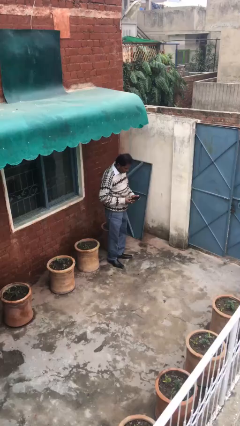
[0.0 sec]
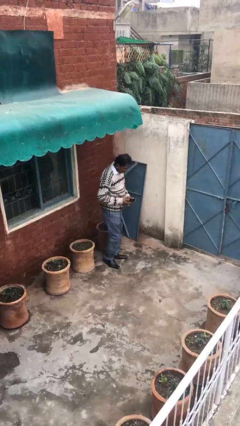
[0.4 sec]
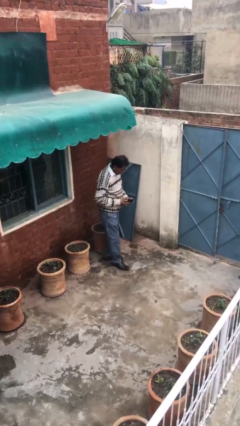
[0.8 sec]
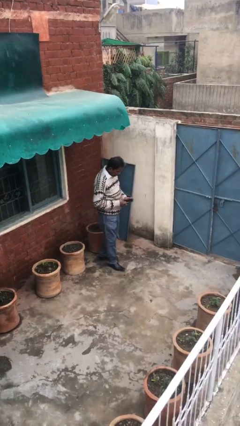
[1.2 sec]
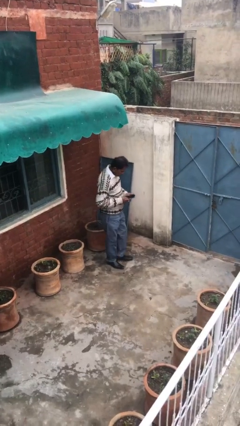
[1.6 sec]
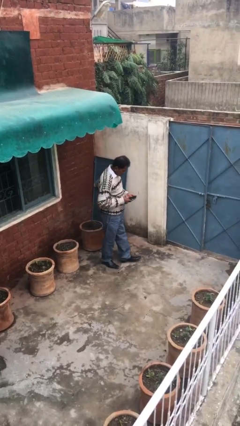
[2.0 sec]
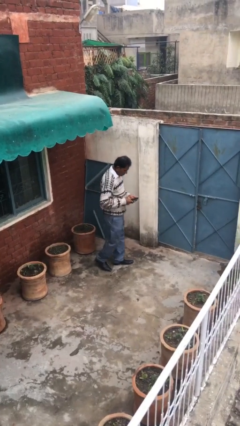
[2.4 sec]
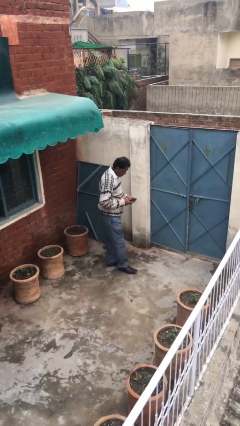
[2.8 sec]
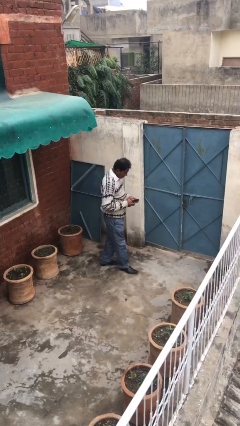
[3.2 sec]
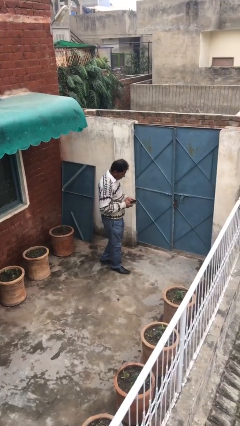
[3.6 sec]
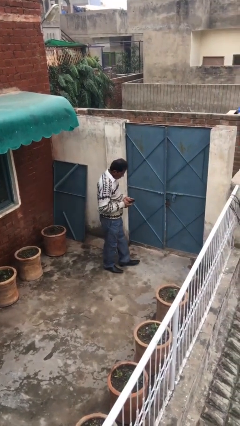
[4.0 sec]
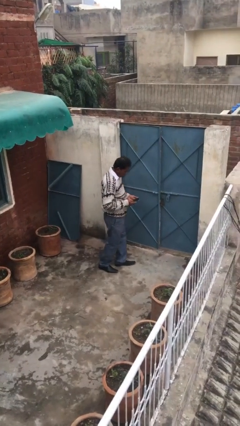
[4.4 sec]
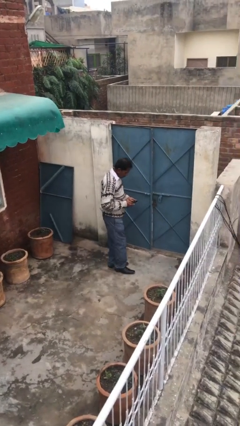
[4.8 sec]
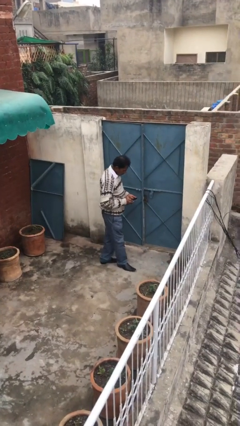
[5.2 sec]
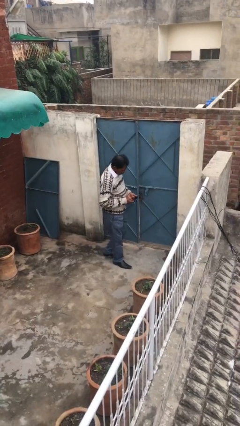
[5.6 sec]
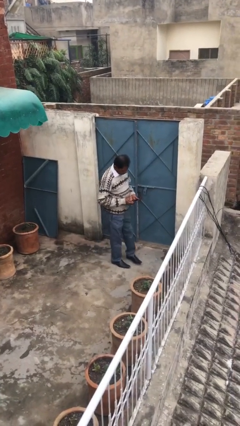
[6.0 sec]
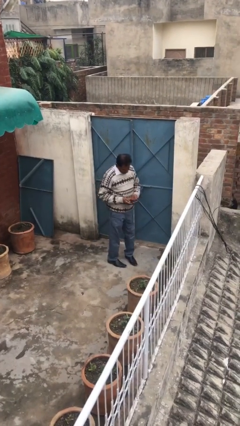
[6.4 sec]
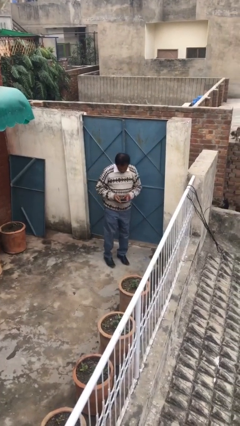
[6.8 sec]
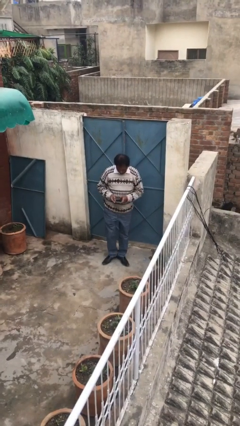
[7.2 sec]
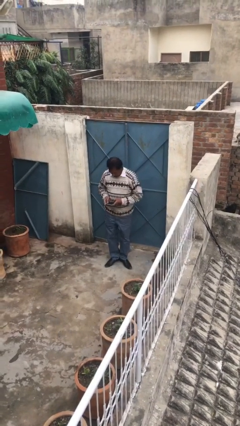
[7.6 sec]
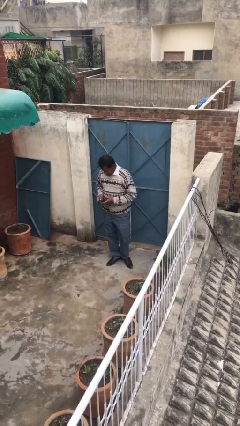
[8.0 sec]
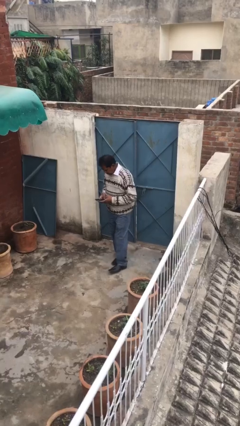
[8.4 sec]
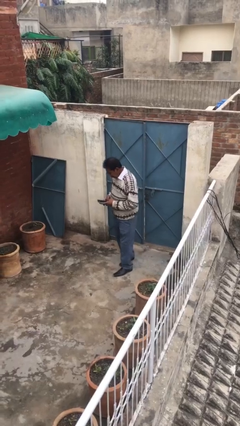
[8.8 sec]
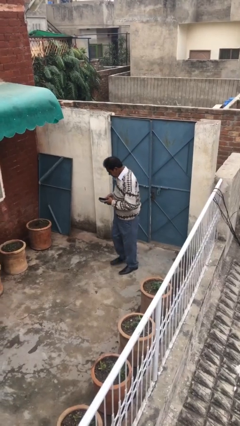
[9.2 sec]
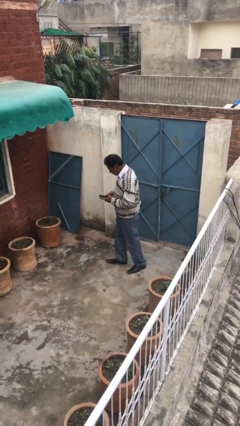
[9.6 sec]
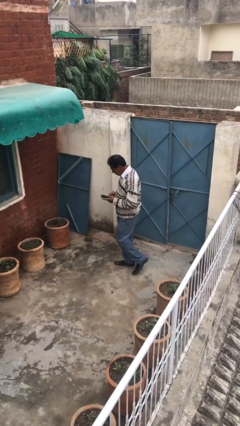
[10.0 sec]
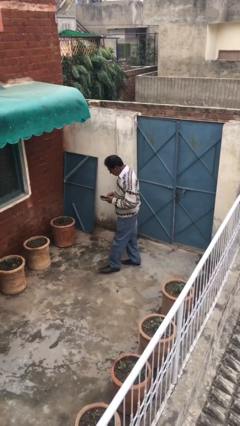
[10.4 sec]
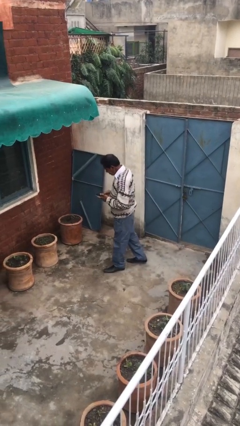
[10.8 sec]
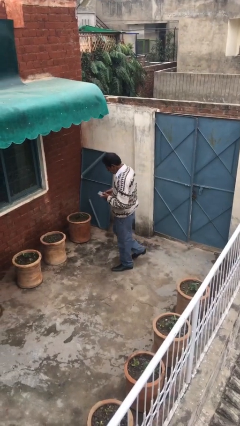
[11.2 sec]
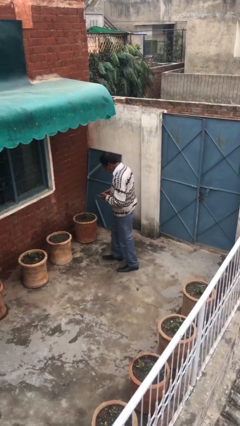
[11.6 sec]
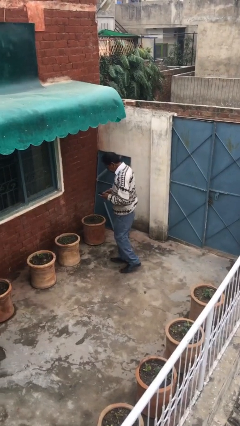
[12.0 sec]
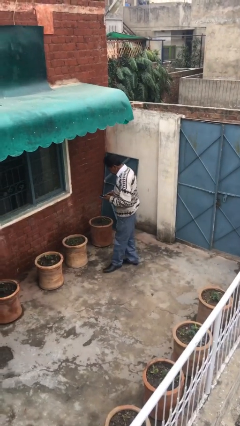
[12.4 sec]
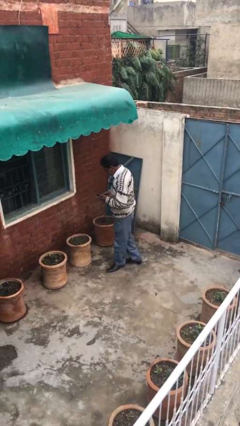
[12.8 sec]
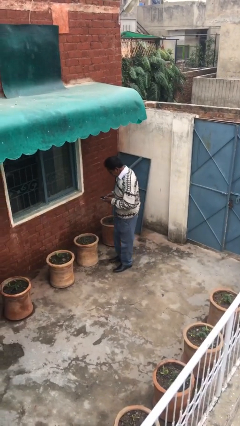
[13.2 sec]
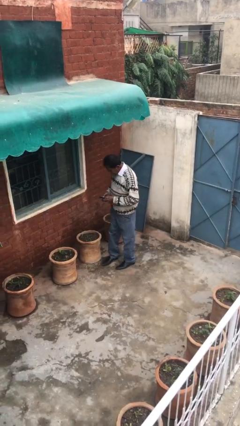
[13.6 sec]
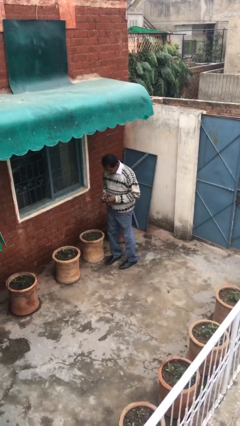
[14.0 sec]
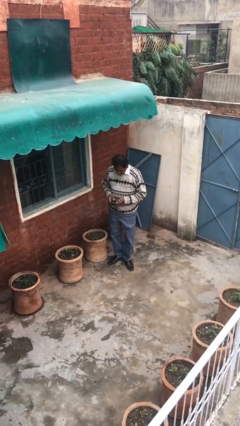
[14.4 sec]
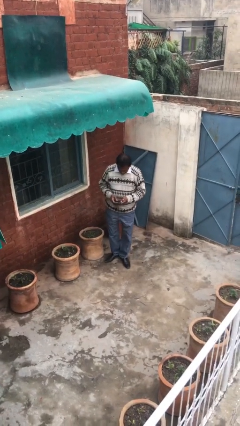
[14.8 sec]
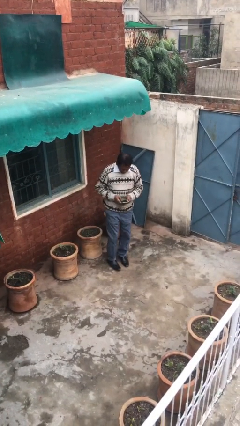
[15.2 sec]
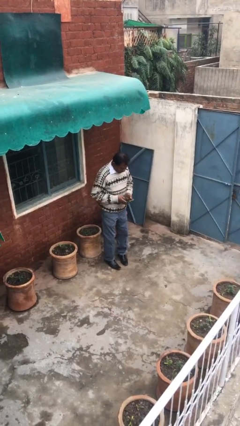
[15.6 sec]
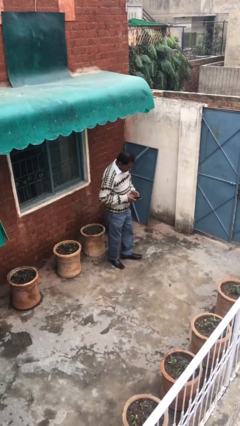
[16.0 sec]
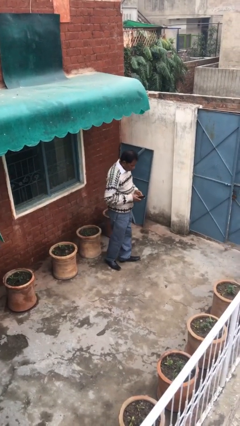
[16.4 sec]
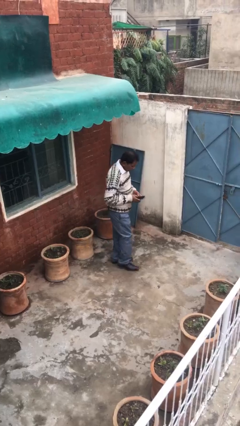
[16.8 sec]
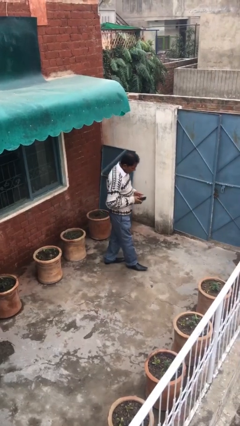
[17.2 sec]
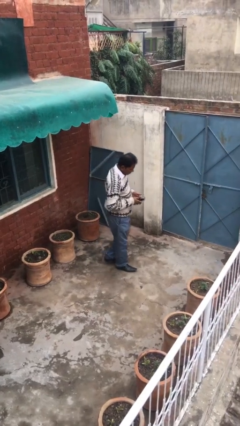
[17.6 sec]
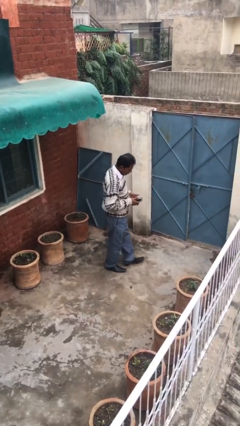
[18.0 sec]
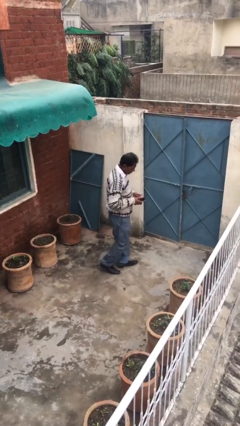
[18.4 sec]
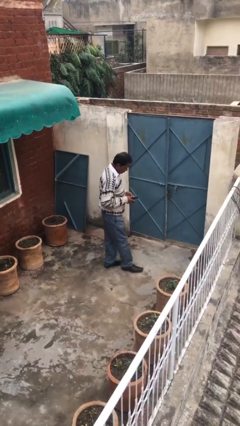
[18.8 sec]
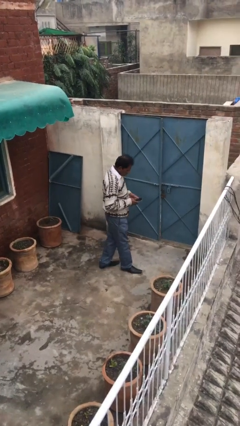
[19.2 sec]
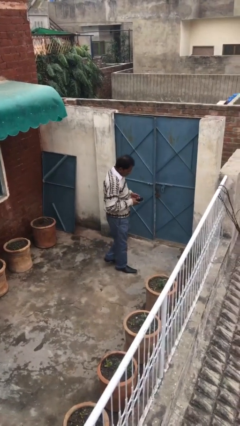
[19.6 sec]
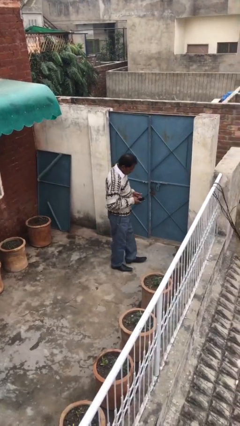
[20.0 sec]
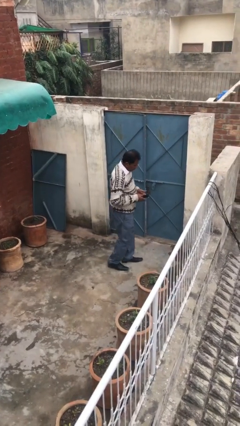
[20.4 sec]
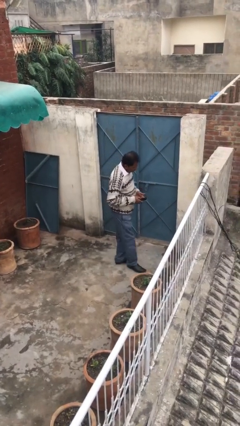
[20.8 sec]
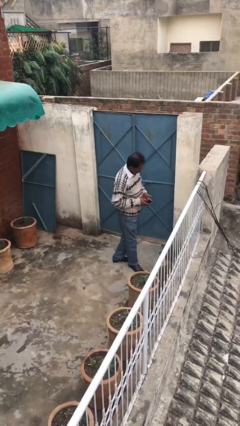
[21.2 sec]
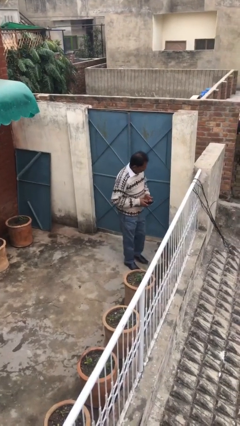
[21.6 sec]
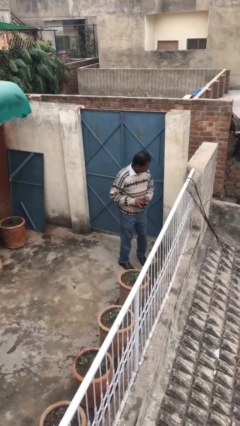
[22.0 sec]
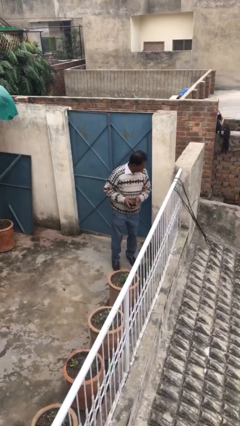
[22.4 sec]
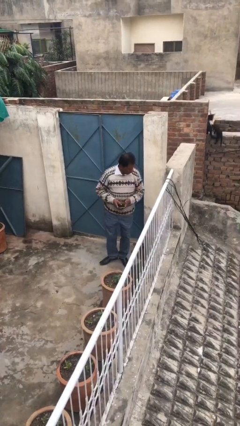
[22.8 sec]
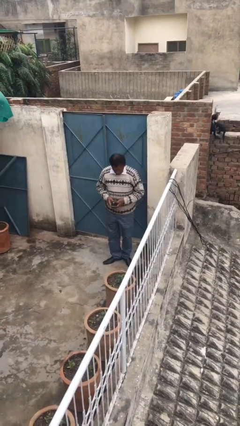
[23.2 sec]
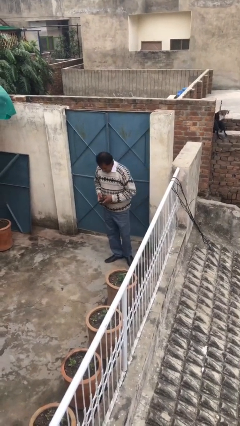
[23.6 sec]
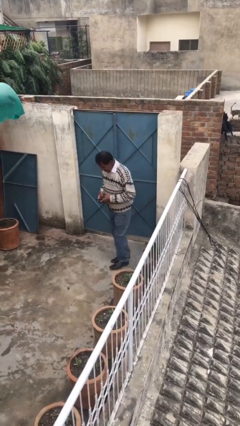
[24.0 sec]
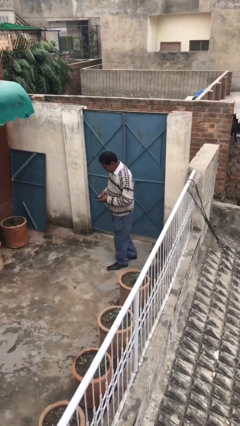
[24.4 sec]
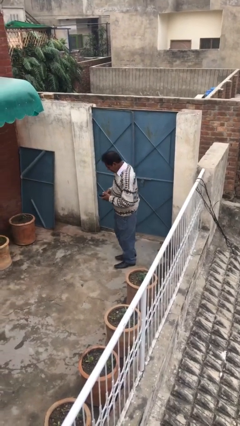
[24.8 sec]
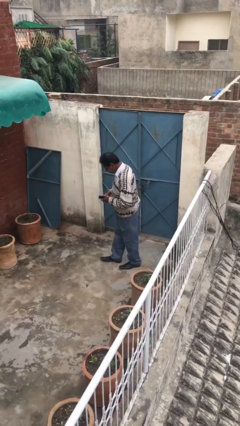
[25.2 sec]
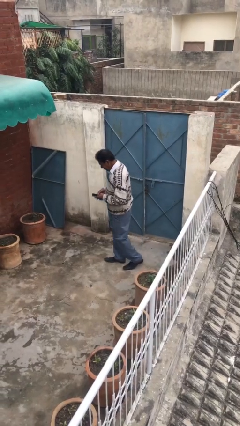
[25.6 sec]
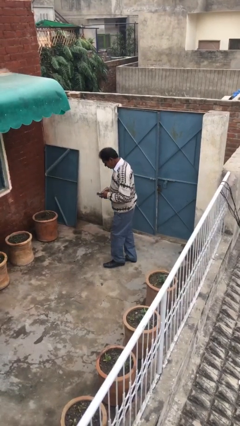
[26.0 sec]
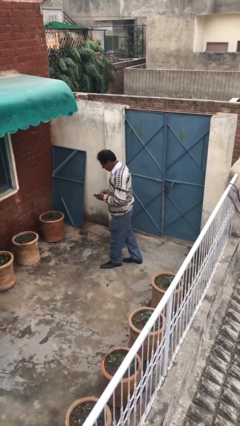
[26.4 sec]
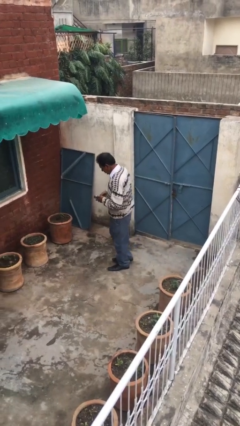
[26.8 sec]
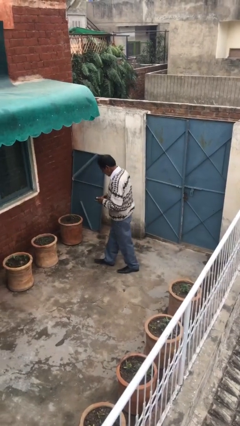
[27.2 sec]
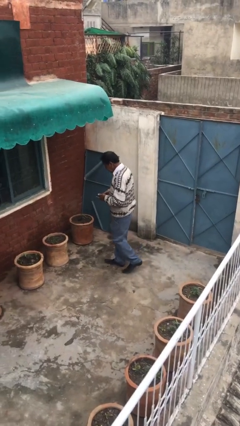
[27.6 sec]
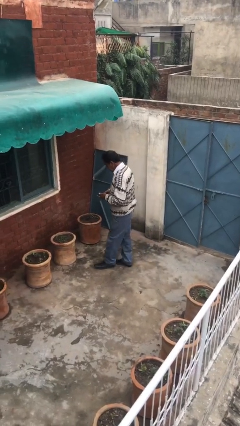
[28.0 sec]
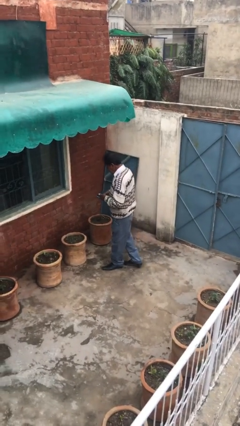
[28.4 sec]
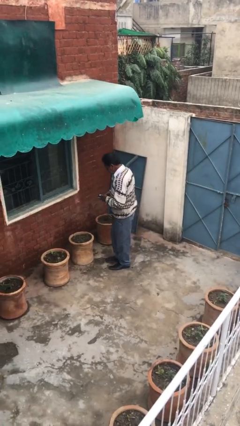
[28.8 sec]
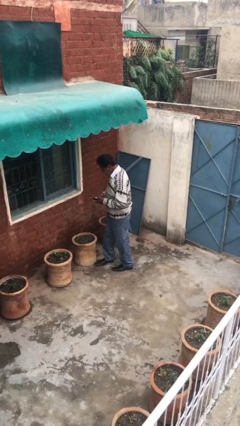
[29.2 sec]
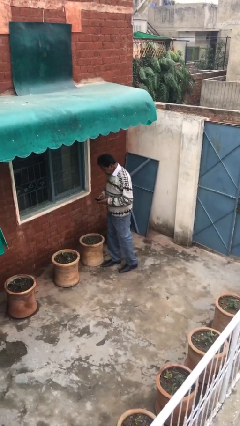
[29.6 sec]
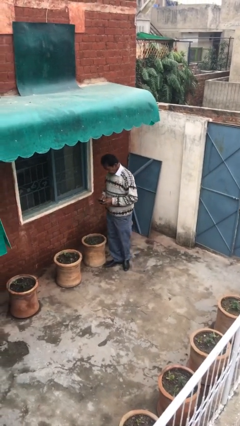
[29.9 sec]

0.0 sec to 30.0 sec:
person walks

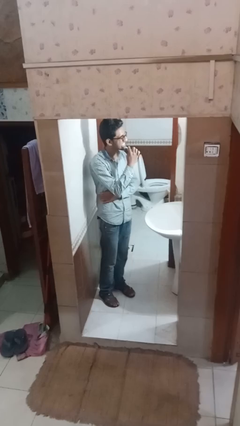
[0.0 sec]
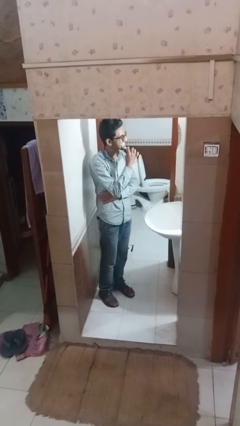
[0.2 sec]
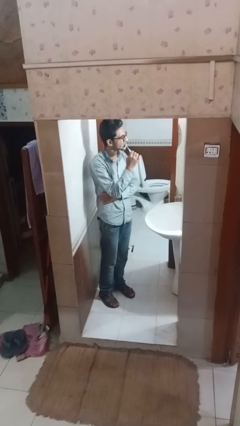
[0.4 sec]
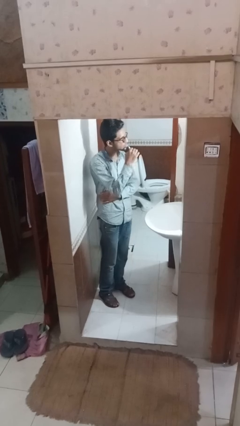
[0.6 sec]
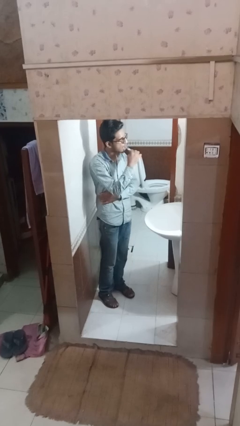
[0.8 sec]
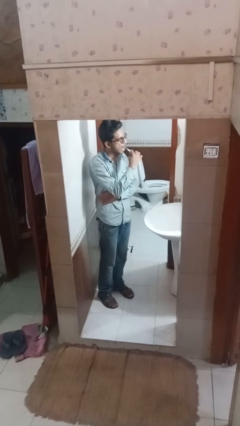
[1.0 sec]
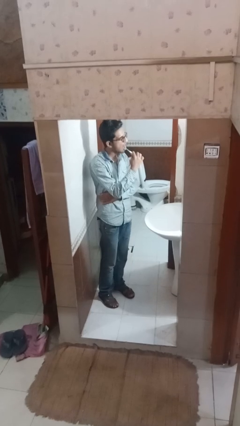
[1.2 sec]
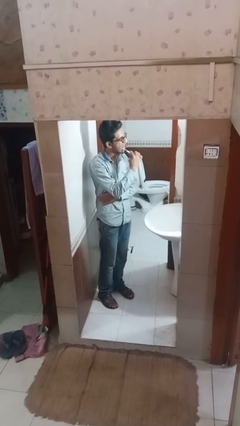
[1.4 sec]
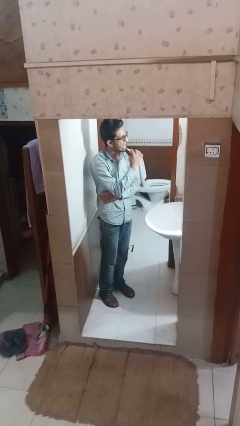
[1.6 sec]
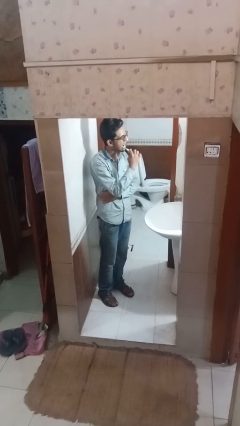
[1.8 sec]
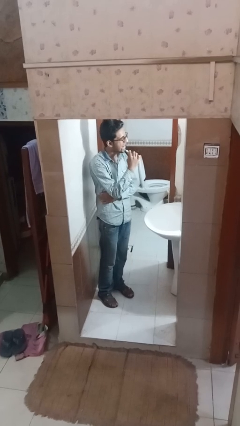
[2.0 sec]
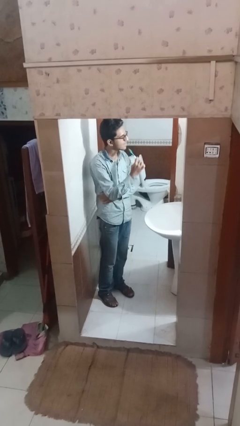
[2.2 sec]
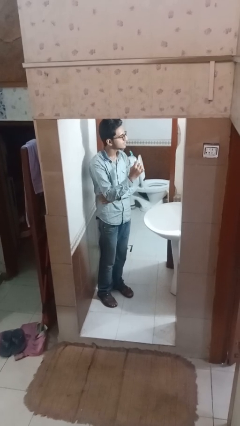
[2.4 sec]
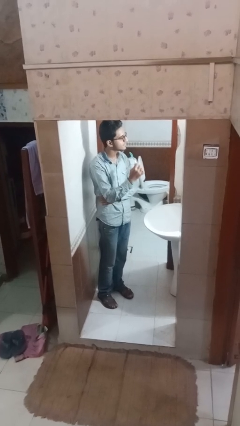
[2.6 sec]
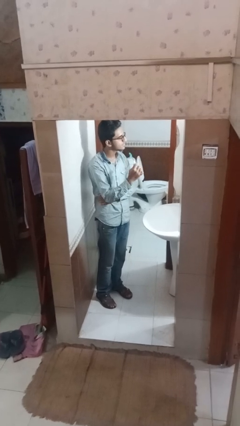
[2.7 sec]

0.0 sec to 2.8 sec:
person brushes teeth

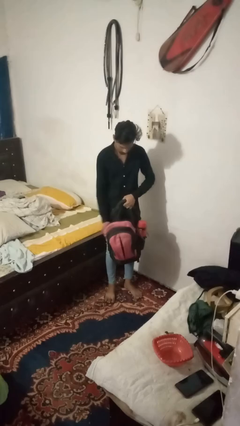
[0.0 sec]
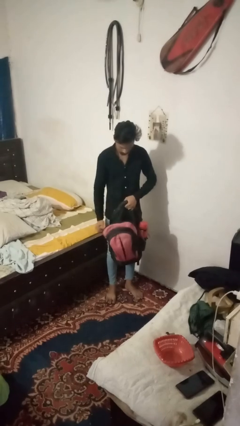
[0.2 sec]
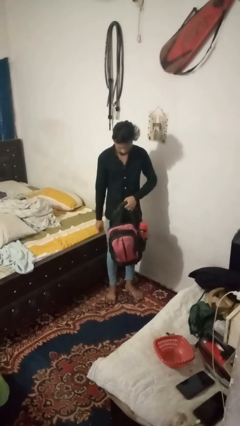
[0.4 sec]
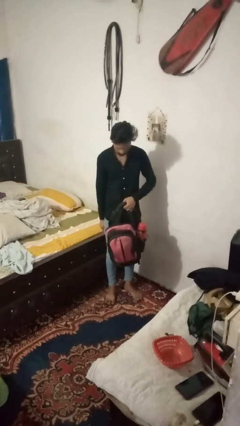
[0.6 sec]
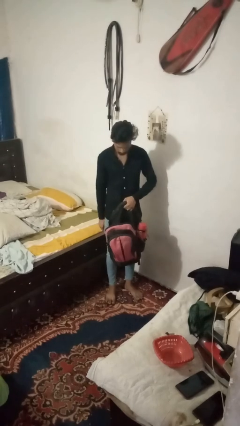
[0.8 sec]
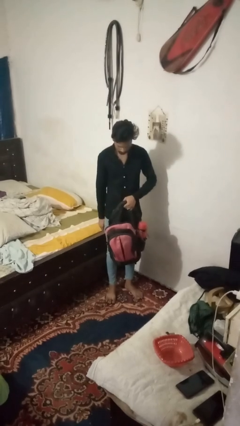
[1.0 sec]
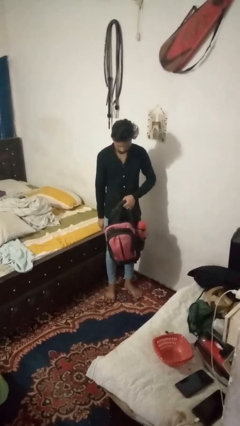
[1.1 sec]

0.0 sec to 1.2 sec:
person puts object into bag
